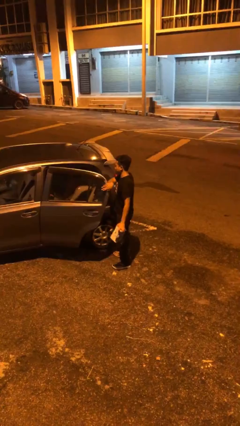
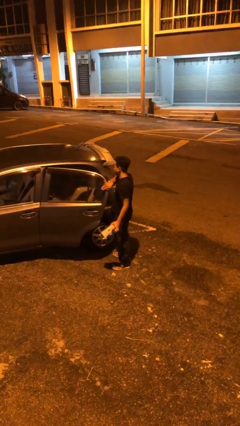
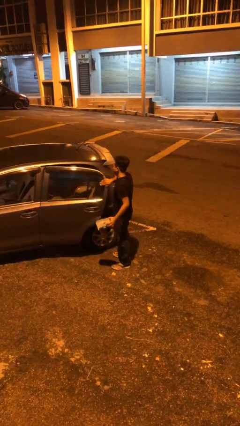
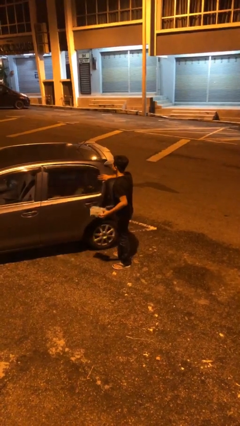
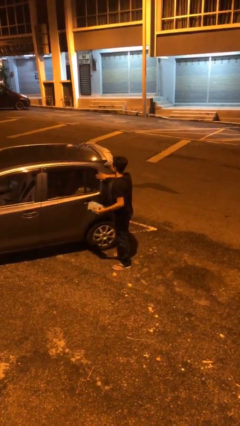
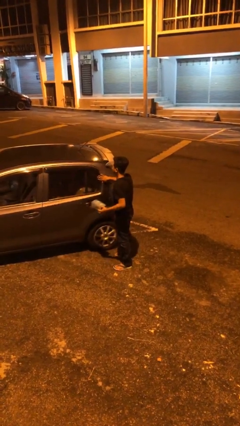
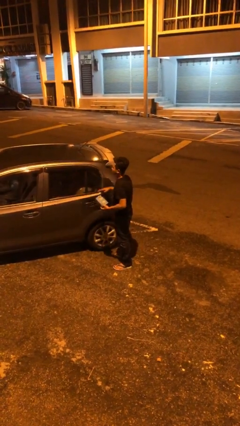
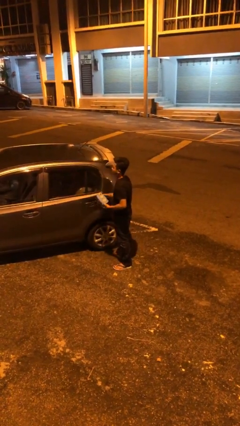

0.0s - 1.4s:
person closes car door

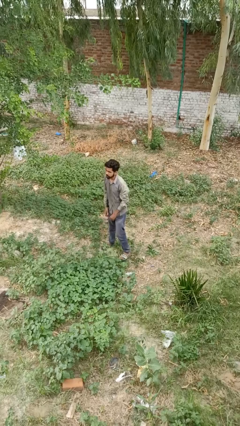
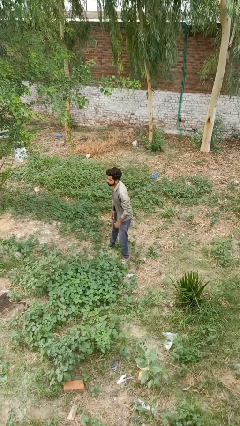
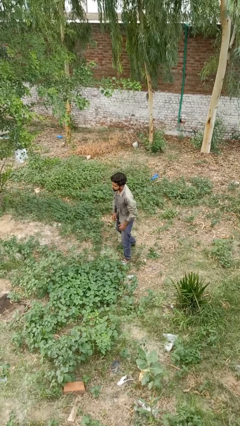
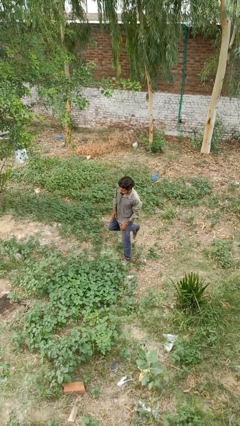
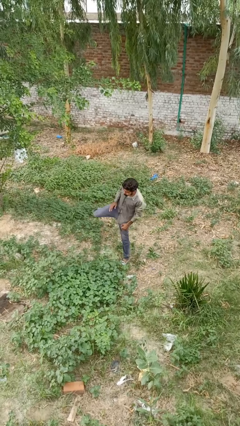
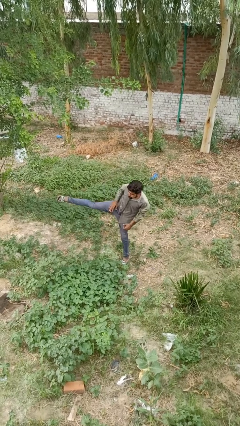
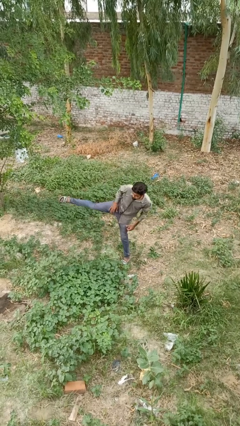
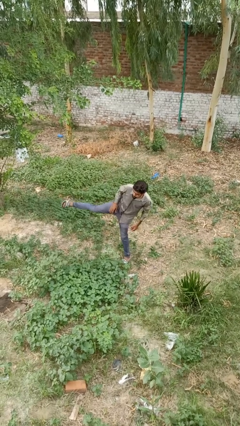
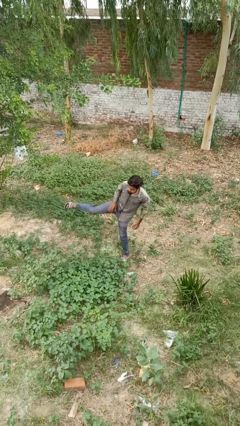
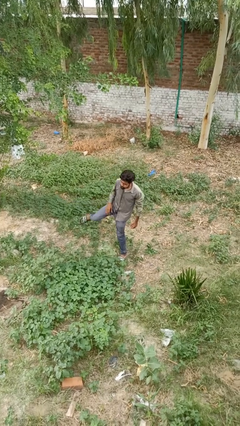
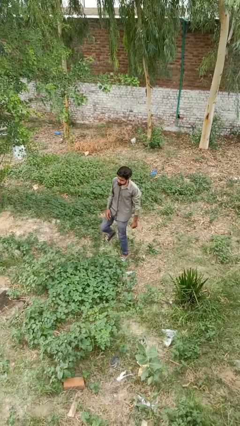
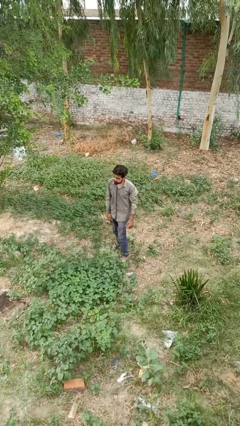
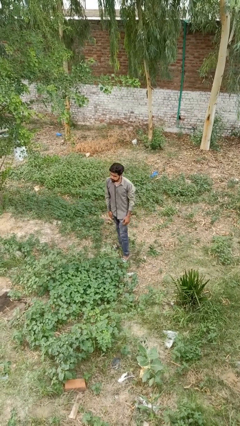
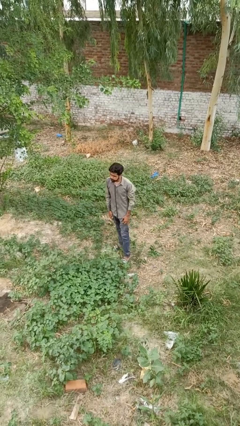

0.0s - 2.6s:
person karate kicks

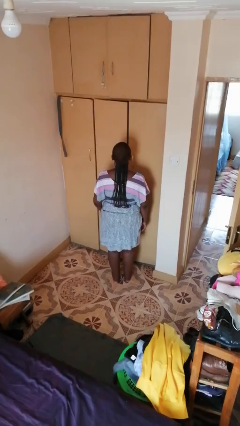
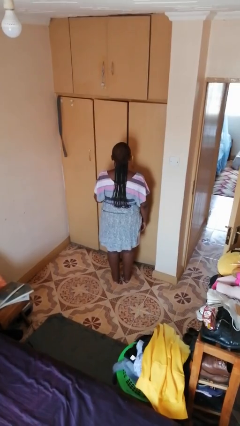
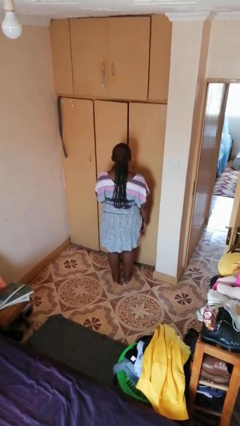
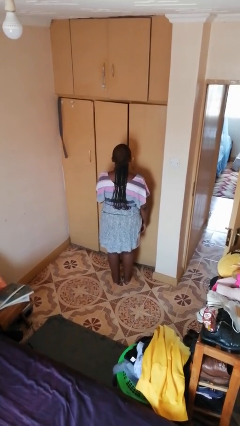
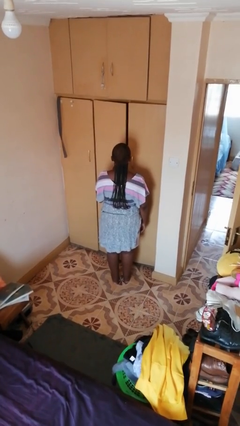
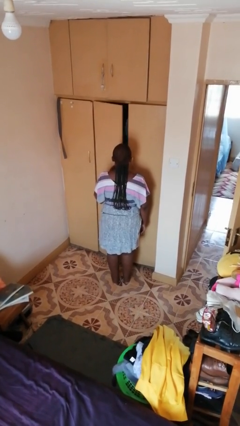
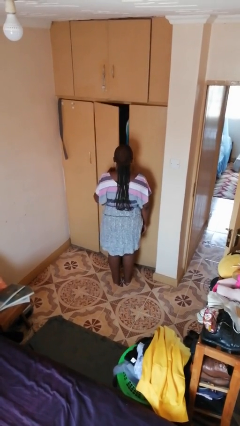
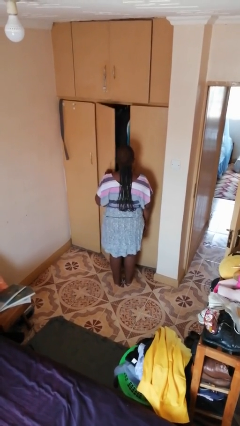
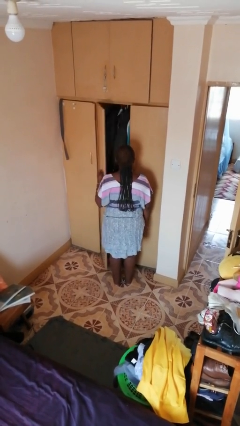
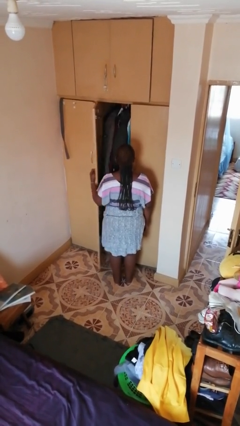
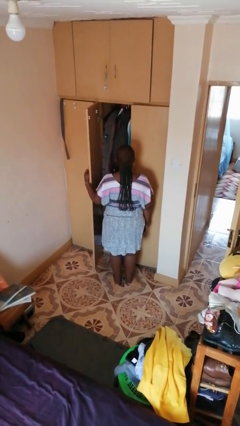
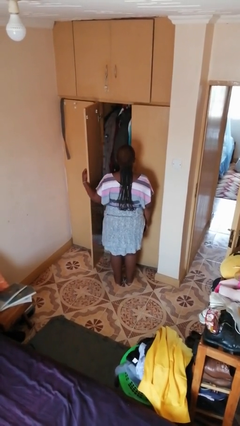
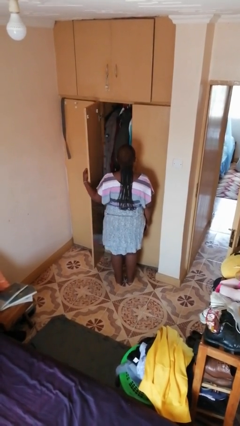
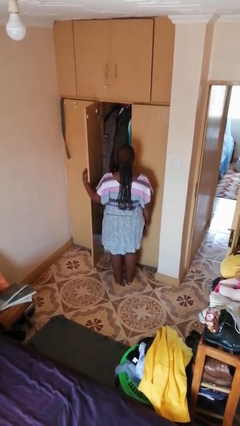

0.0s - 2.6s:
person opens closet door

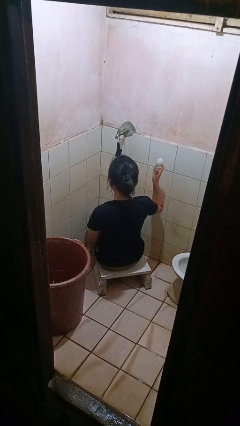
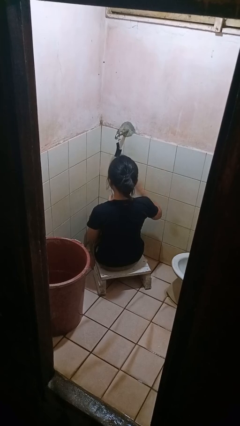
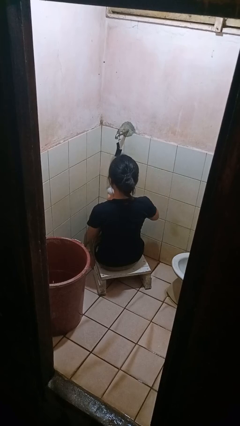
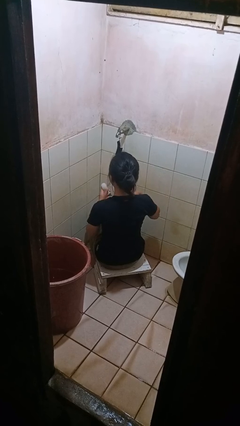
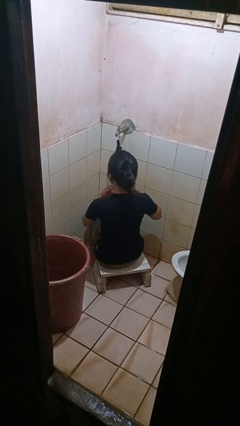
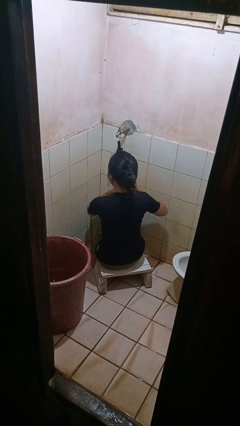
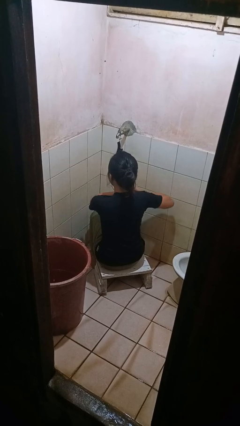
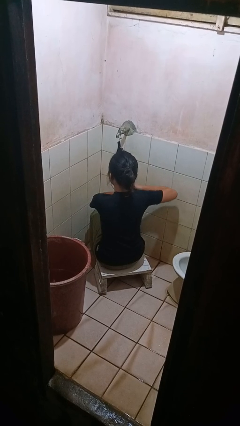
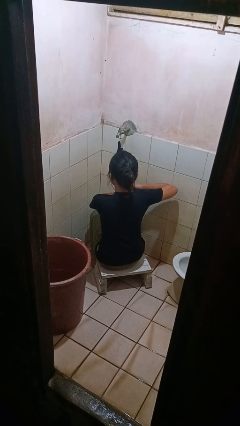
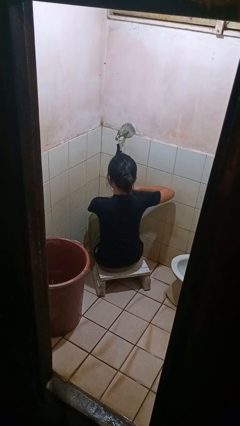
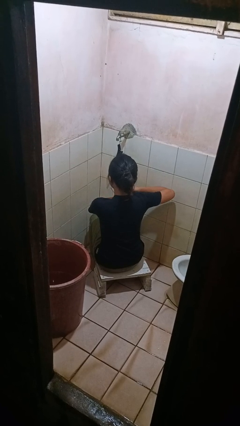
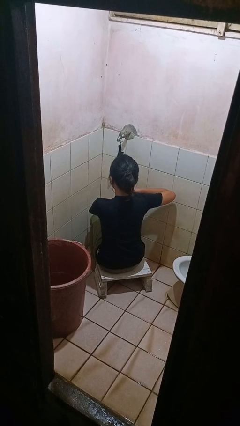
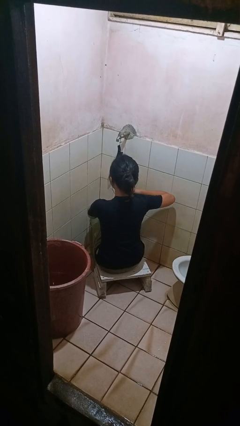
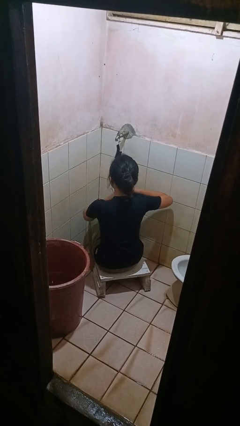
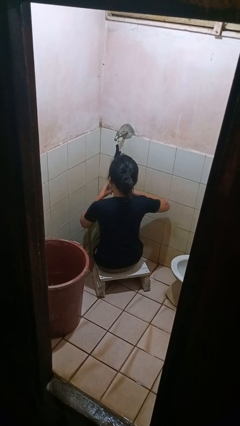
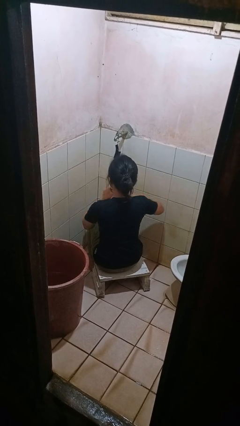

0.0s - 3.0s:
person applies deodorant

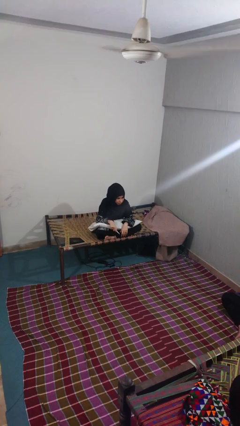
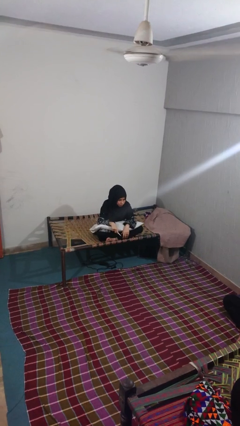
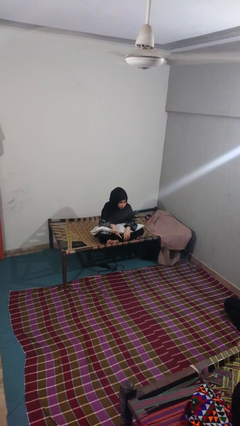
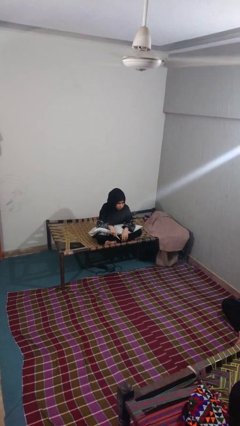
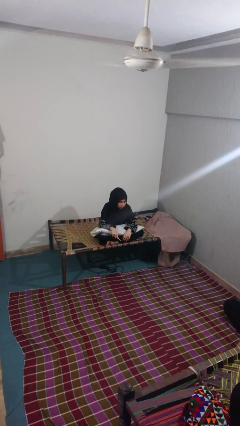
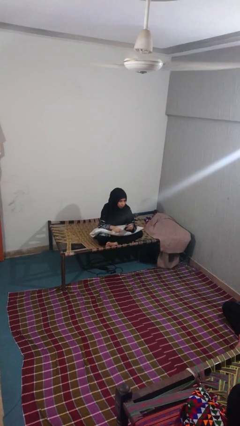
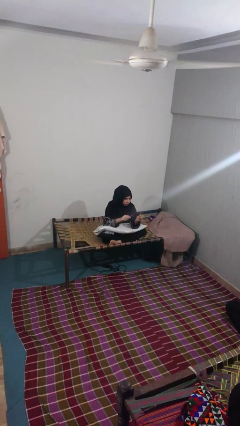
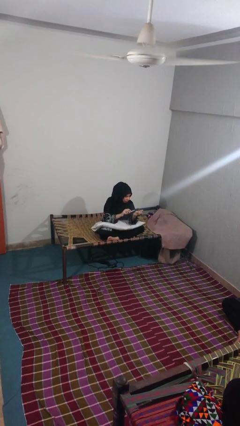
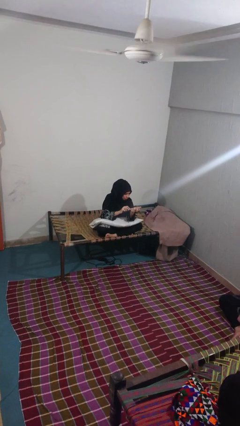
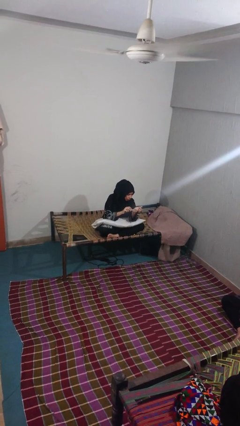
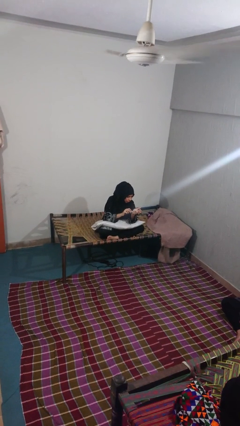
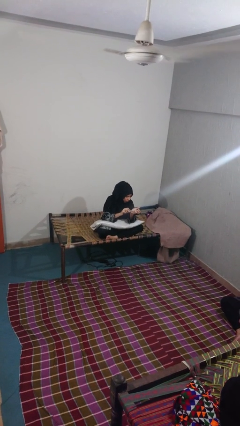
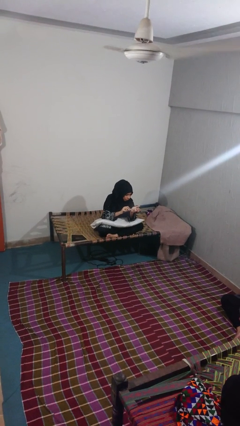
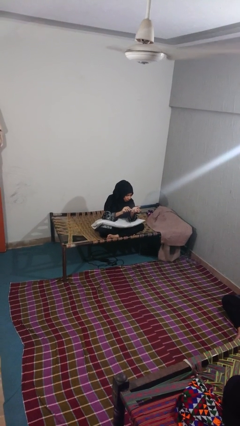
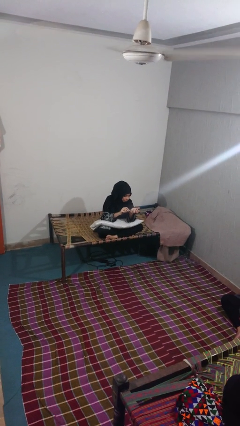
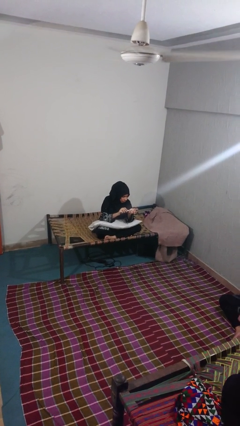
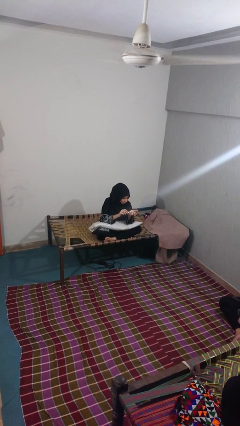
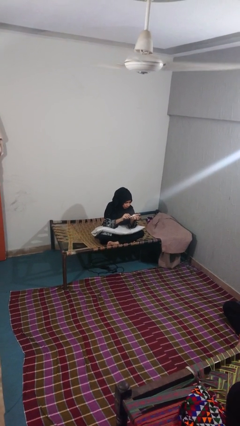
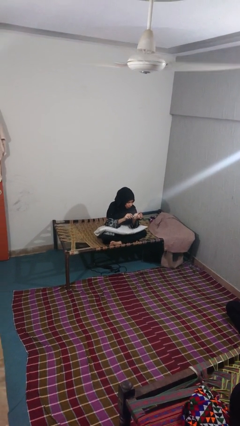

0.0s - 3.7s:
person files fingernails

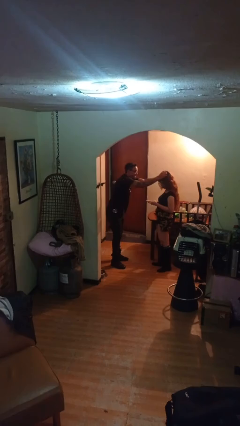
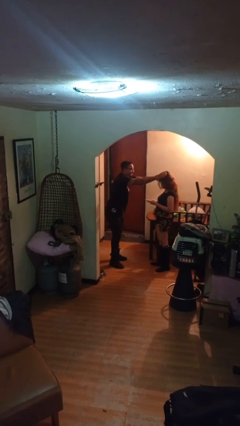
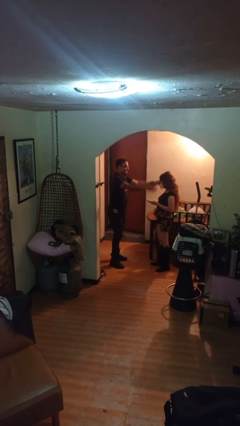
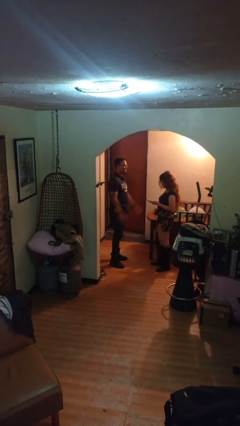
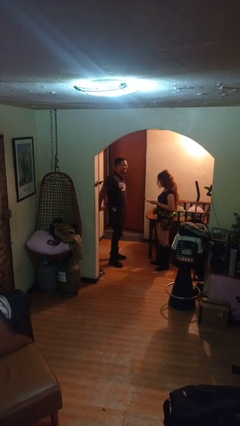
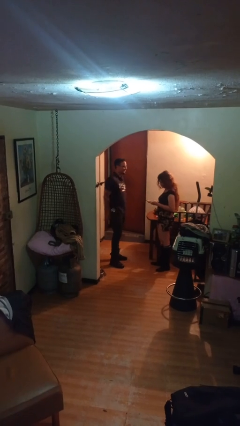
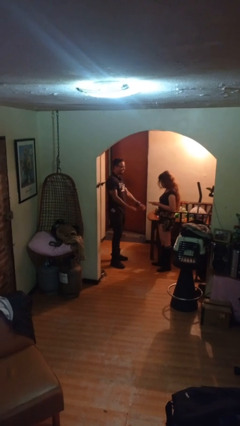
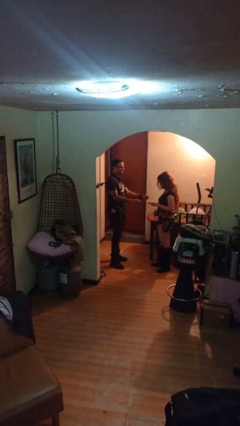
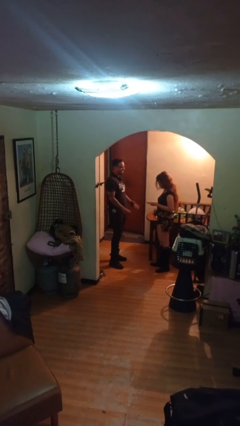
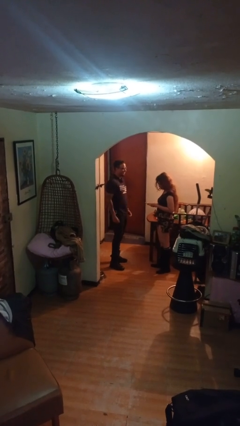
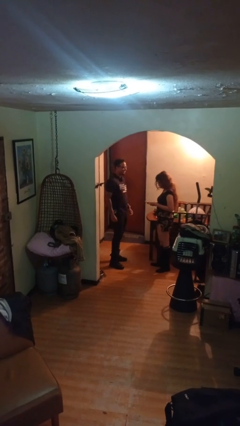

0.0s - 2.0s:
person puts down object on table

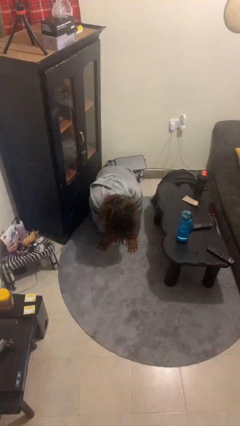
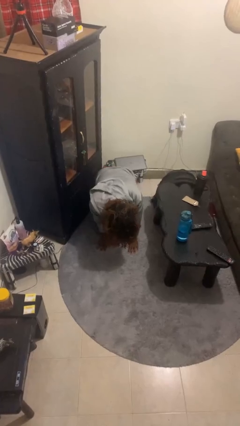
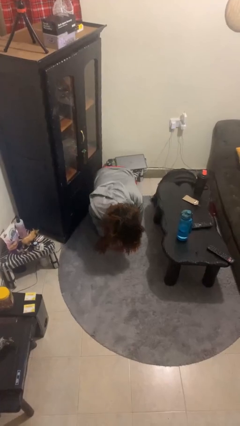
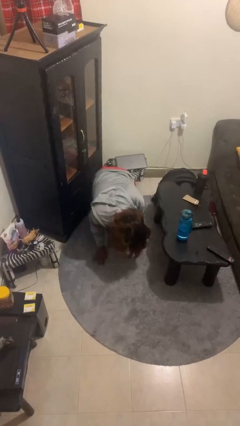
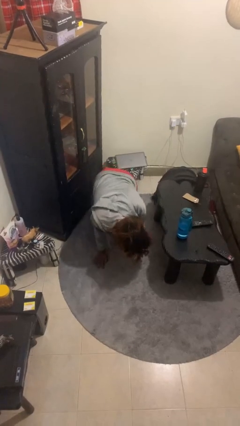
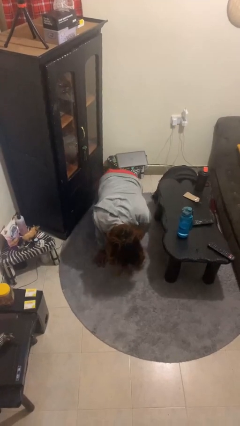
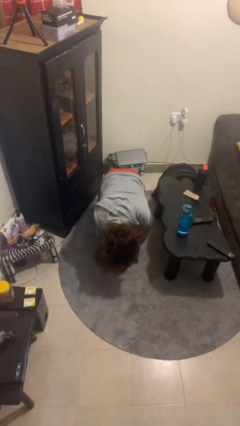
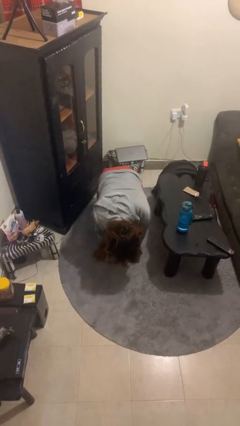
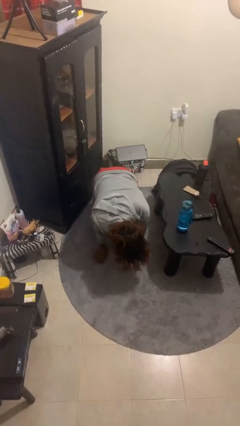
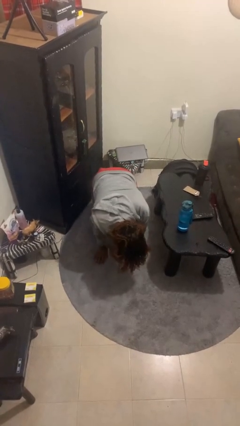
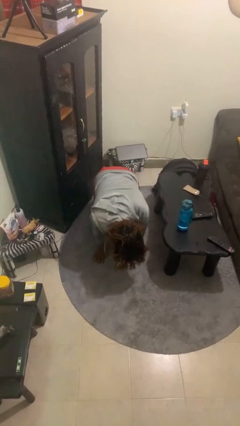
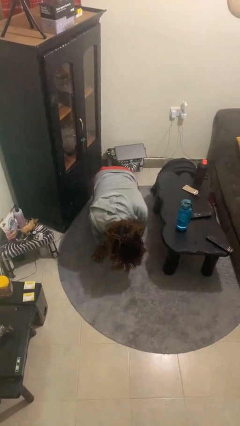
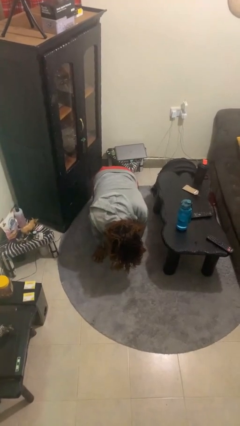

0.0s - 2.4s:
person crawls
